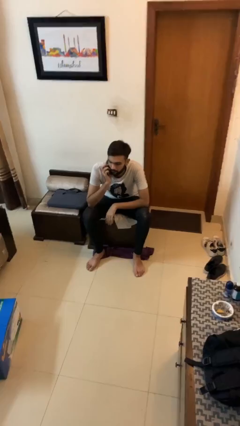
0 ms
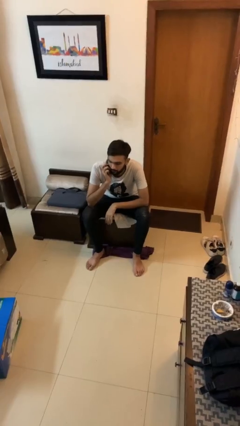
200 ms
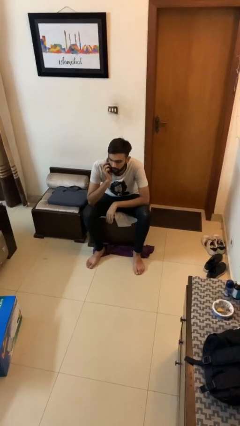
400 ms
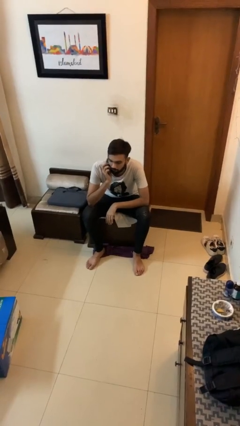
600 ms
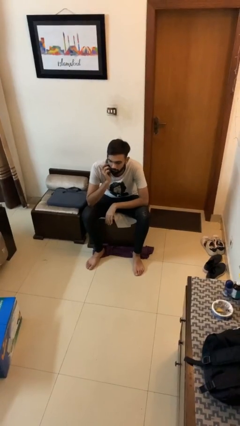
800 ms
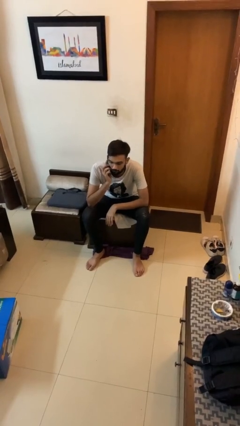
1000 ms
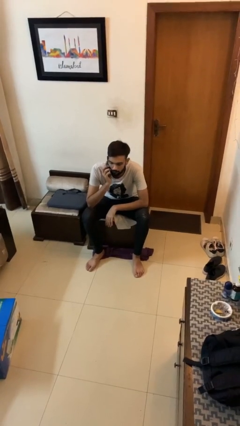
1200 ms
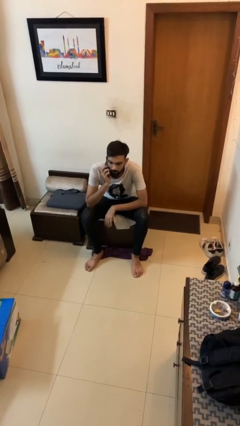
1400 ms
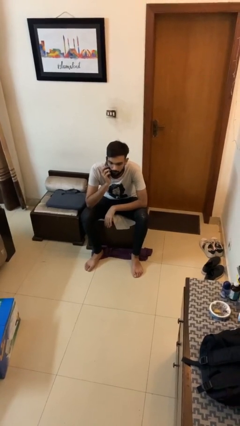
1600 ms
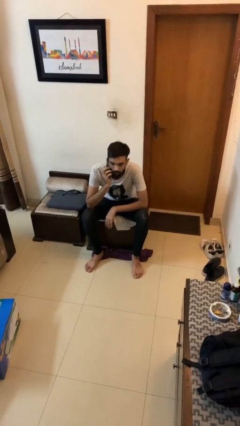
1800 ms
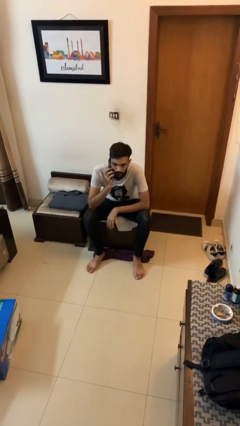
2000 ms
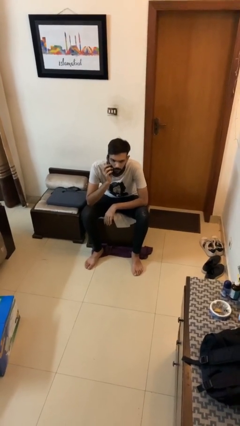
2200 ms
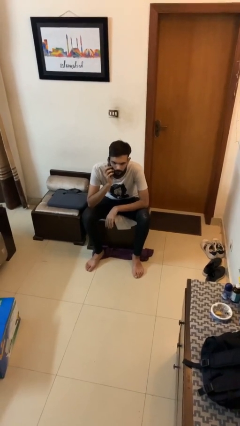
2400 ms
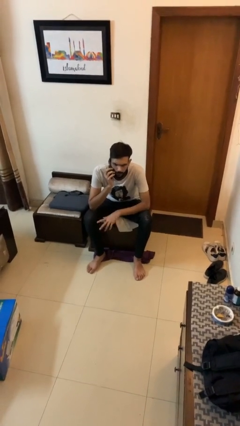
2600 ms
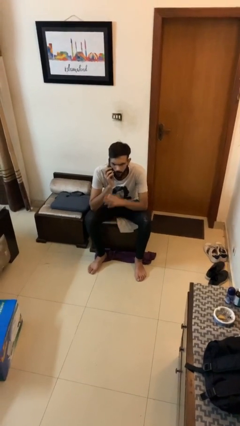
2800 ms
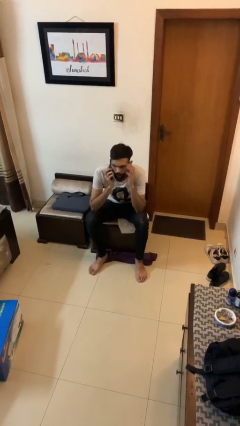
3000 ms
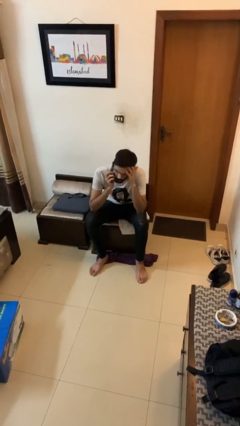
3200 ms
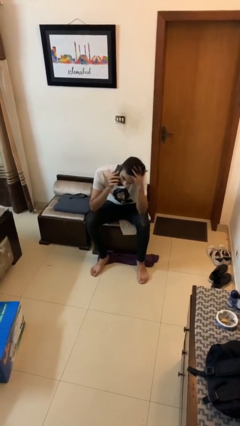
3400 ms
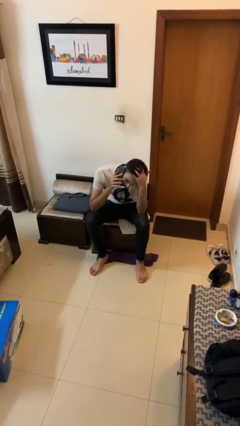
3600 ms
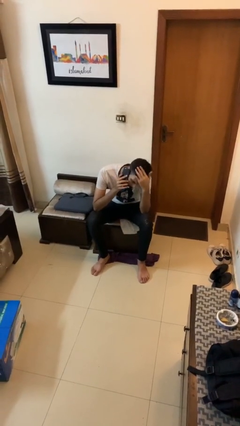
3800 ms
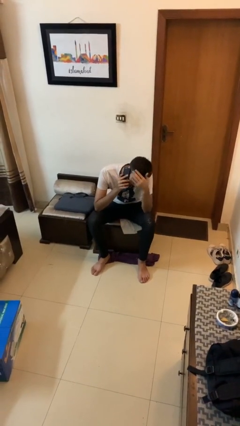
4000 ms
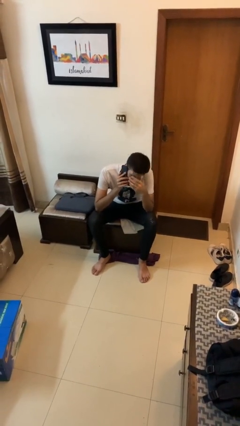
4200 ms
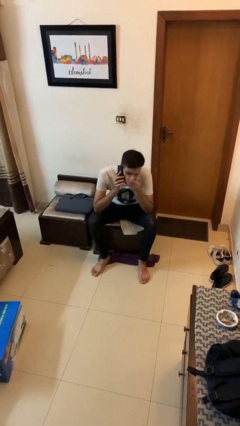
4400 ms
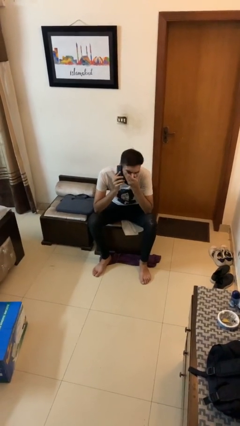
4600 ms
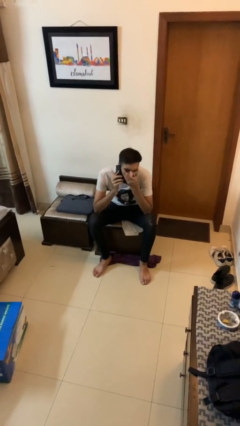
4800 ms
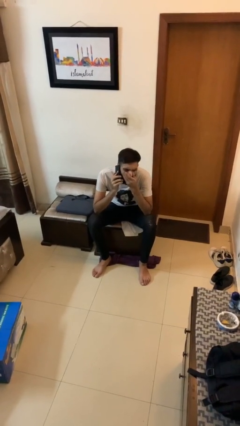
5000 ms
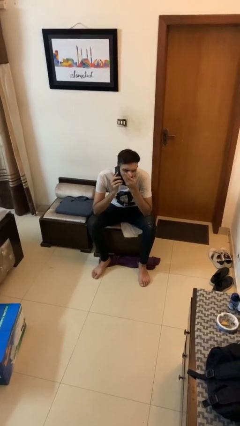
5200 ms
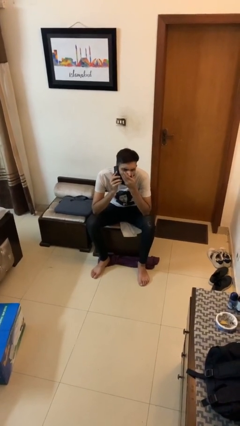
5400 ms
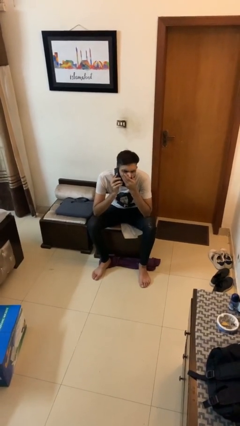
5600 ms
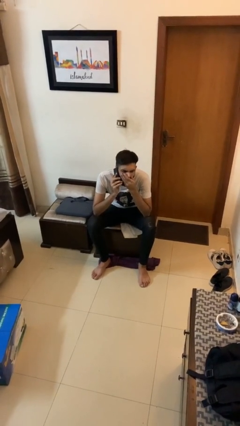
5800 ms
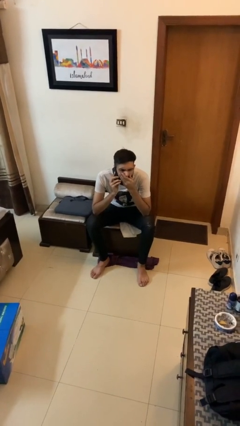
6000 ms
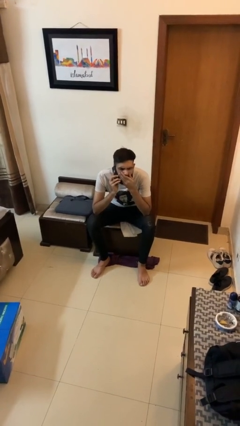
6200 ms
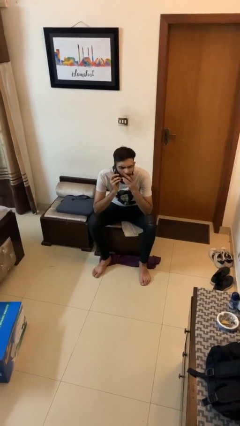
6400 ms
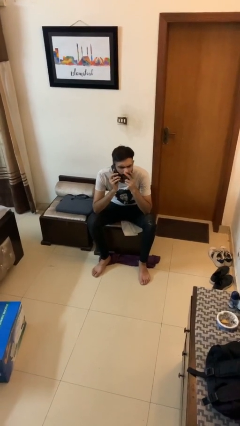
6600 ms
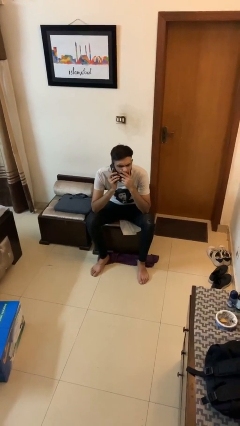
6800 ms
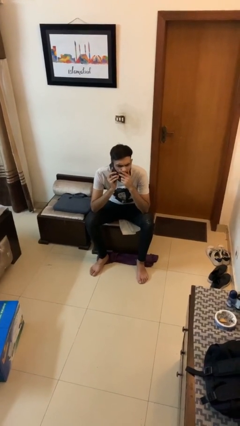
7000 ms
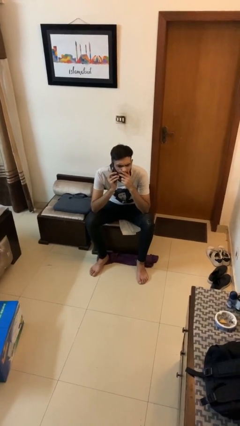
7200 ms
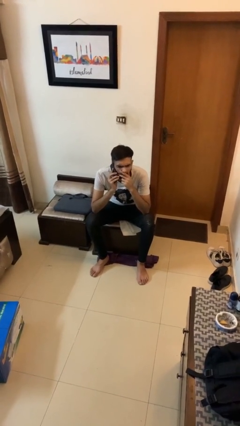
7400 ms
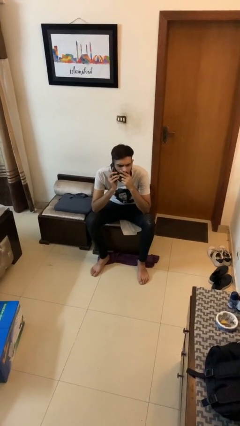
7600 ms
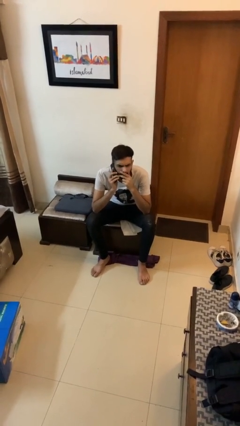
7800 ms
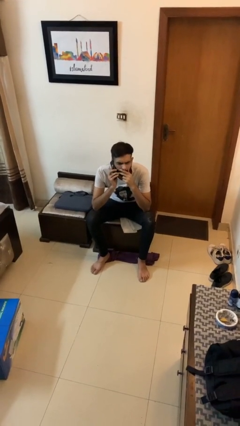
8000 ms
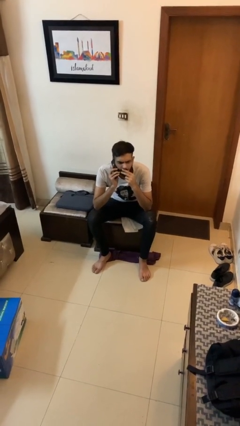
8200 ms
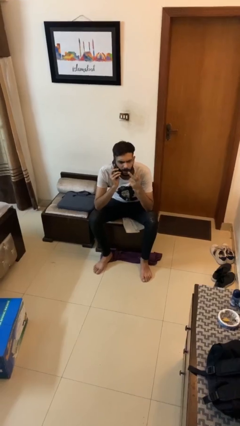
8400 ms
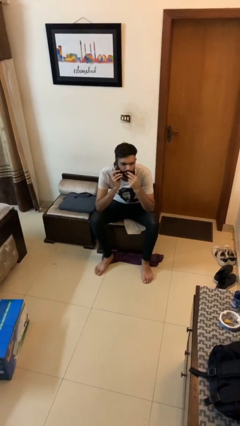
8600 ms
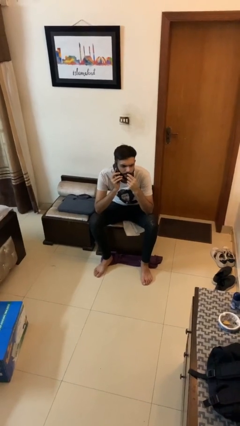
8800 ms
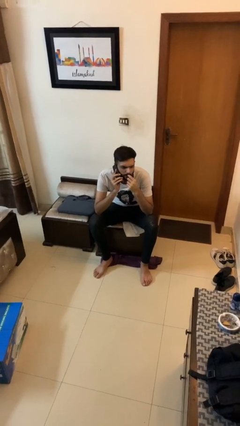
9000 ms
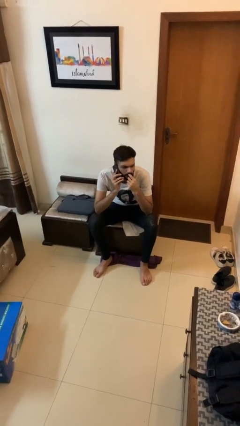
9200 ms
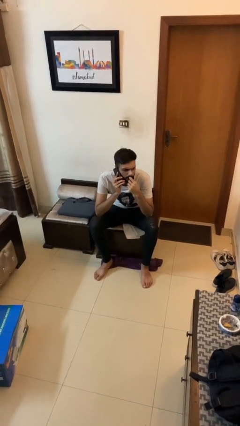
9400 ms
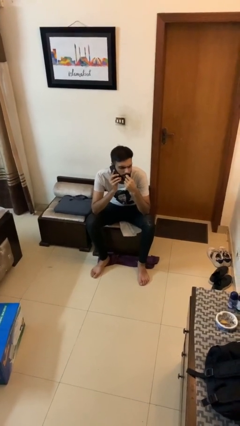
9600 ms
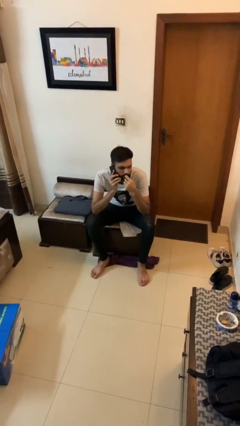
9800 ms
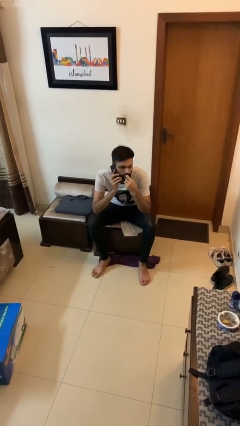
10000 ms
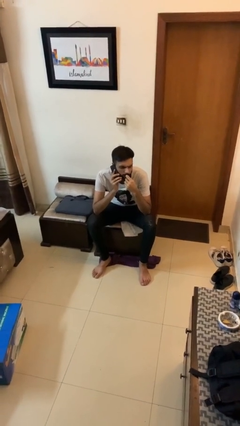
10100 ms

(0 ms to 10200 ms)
person talks on phone

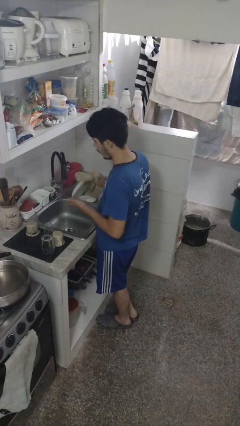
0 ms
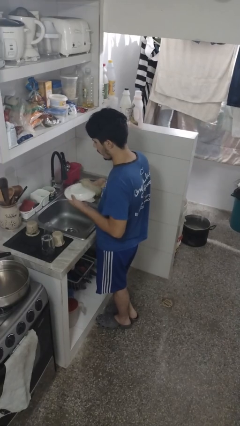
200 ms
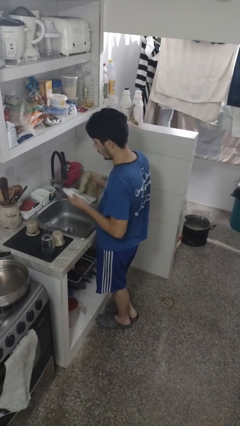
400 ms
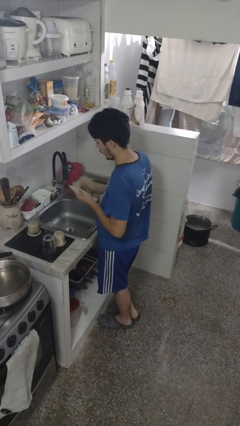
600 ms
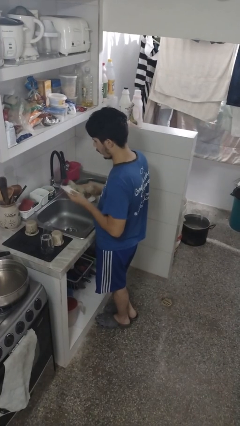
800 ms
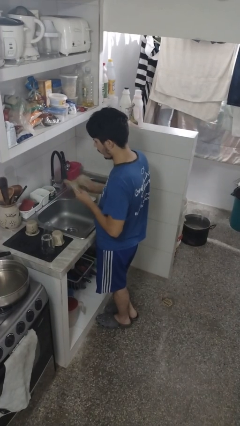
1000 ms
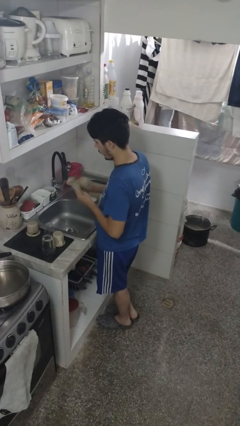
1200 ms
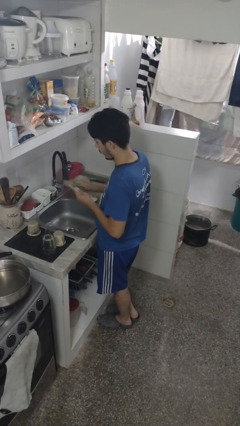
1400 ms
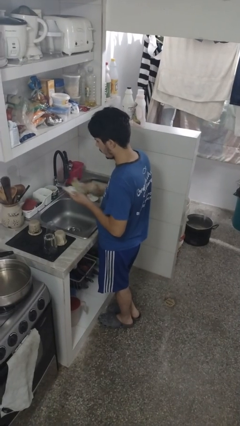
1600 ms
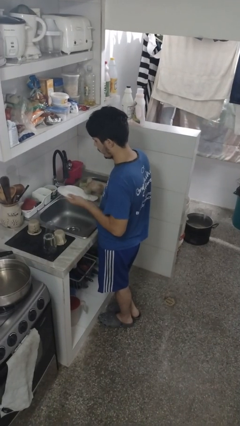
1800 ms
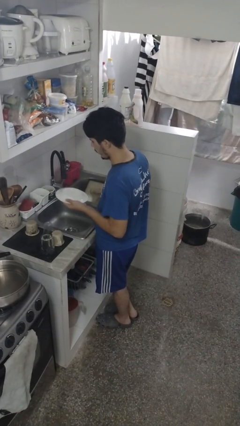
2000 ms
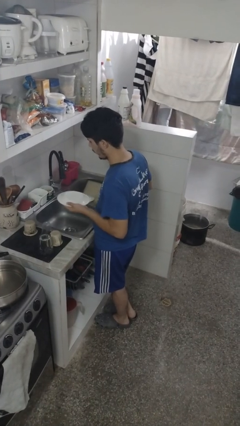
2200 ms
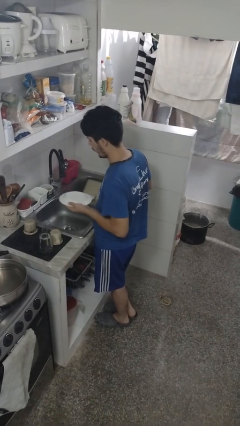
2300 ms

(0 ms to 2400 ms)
person dries dish

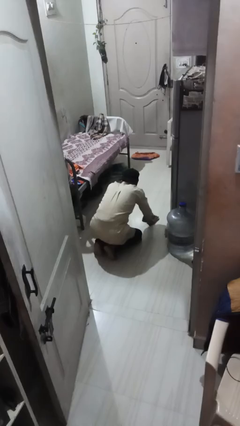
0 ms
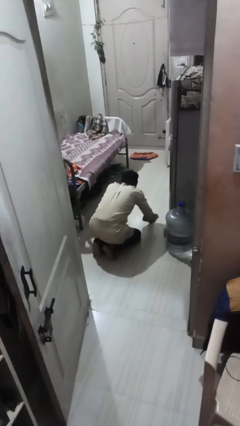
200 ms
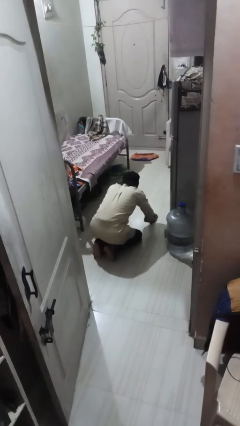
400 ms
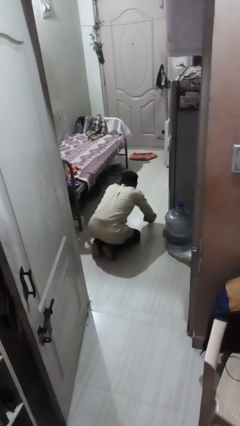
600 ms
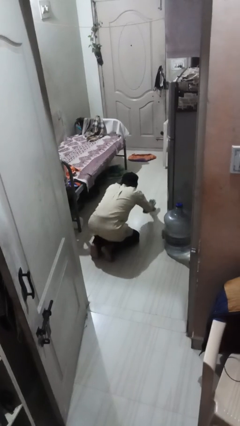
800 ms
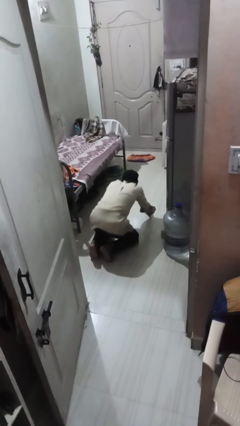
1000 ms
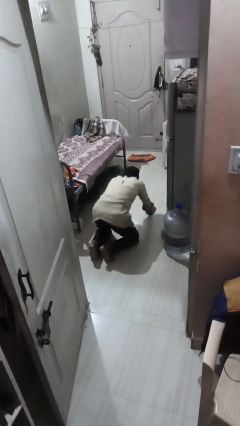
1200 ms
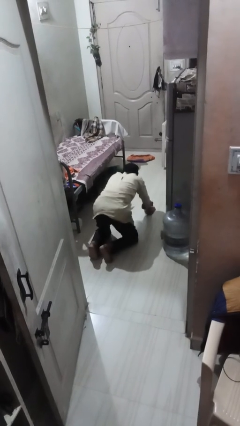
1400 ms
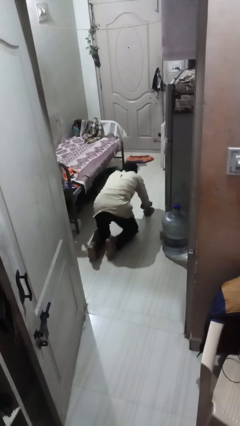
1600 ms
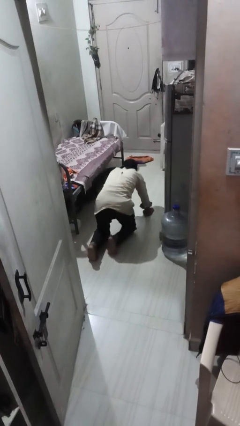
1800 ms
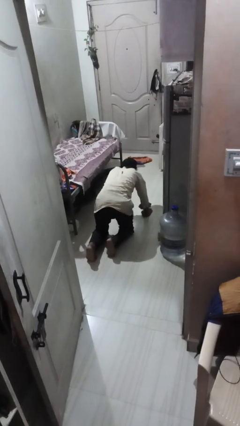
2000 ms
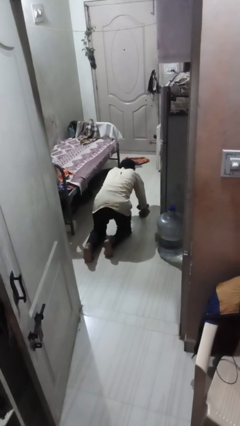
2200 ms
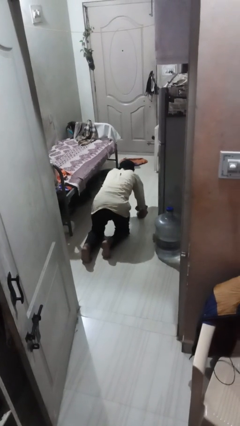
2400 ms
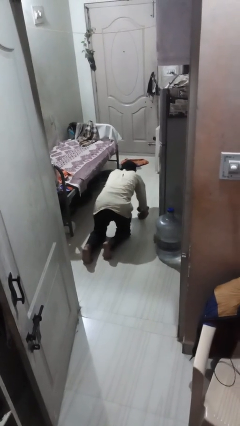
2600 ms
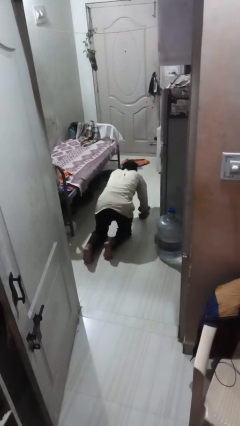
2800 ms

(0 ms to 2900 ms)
person crawls

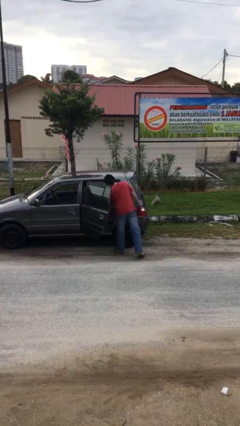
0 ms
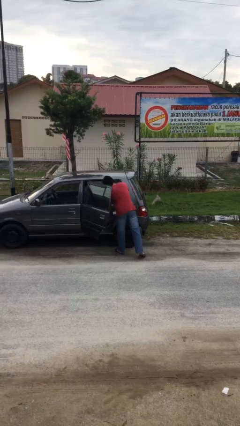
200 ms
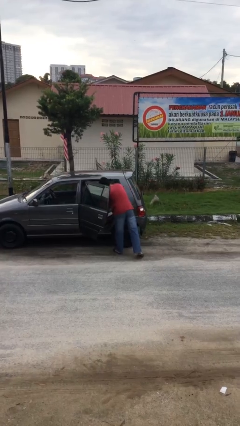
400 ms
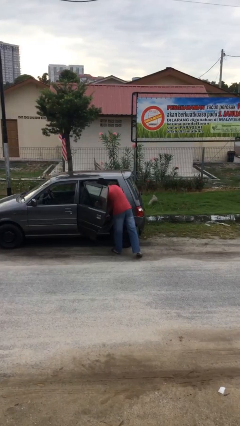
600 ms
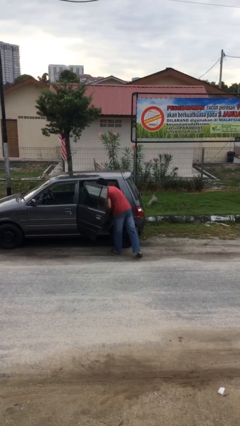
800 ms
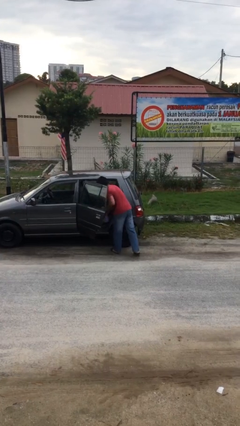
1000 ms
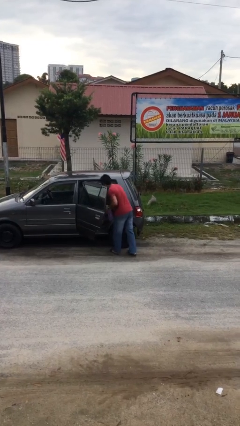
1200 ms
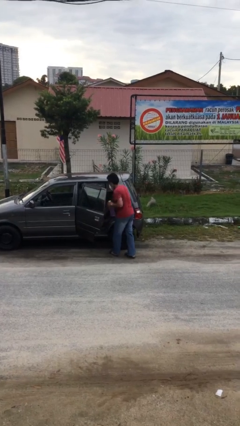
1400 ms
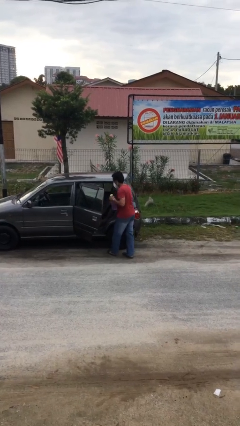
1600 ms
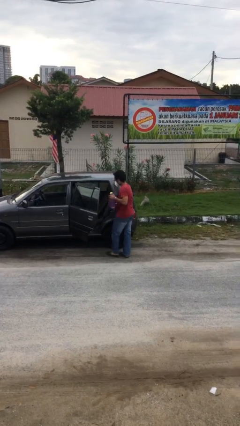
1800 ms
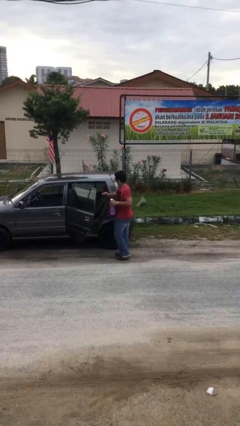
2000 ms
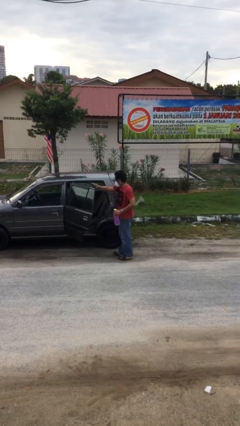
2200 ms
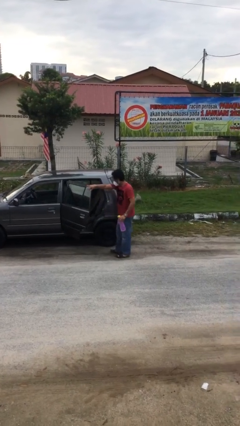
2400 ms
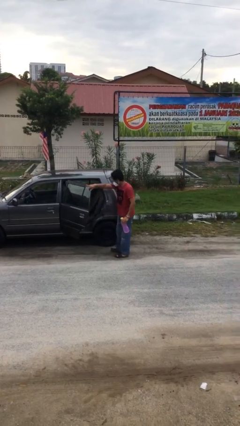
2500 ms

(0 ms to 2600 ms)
person unloads car
